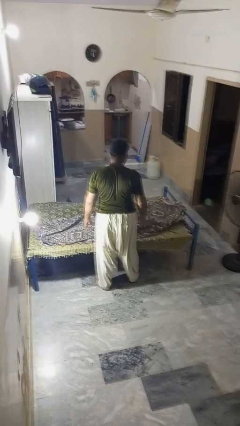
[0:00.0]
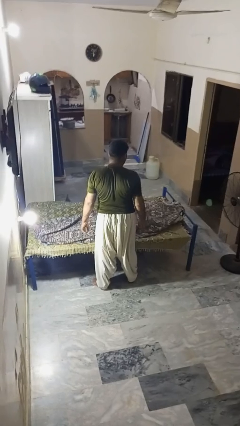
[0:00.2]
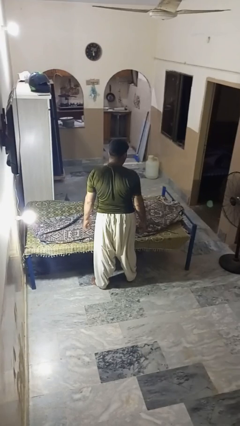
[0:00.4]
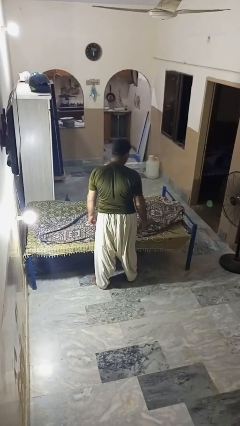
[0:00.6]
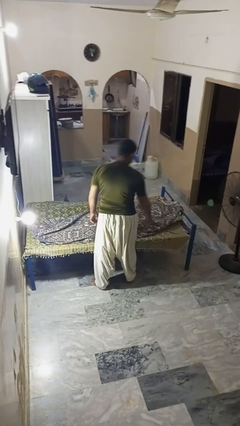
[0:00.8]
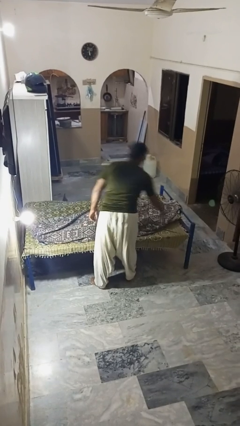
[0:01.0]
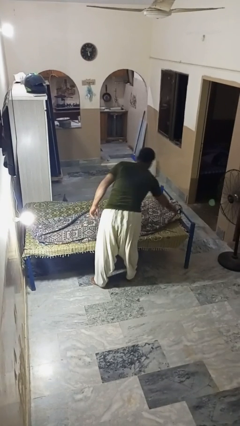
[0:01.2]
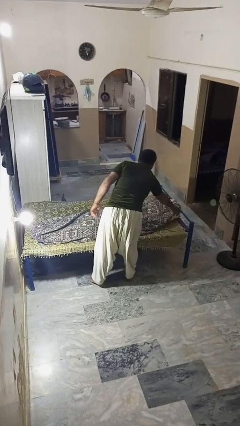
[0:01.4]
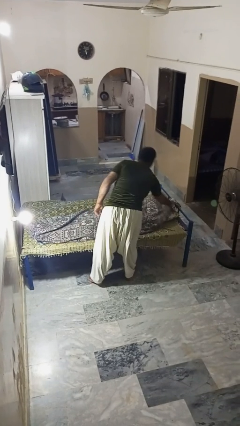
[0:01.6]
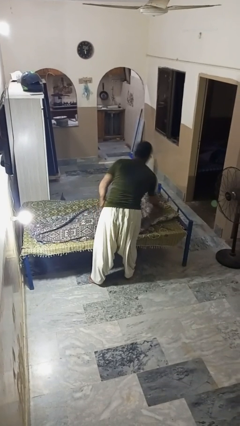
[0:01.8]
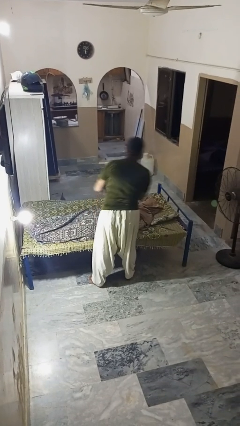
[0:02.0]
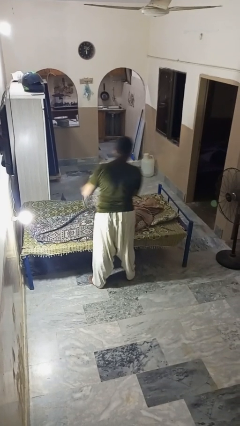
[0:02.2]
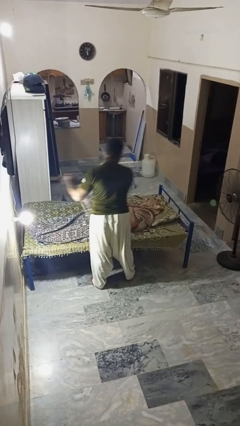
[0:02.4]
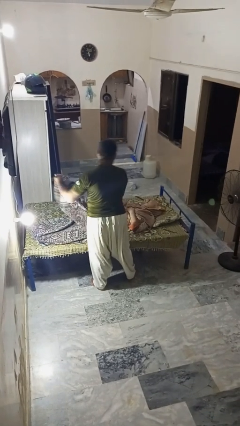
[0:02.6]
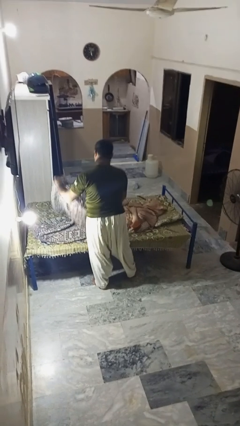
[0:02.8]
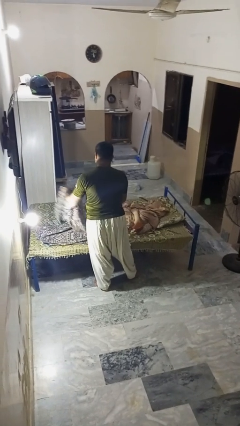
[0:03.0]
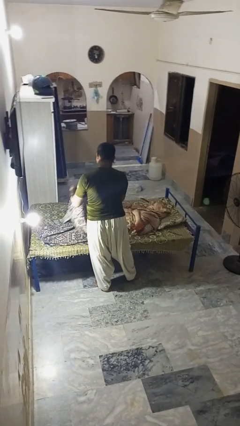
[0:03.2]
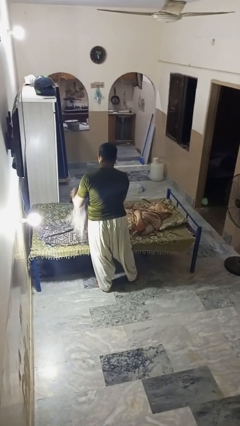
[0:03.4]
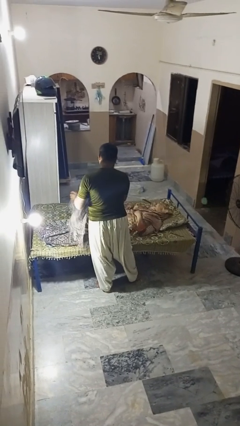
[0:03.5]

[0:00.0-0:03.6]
person uncovers friend with blanket

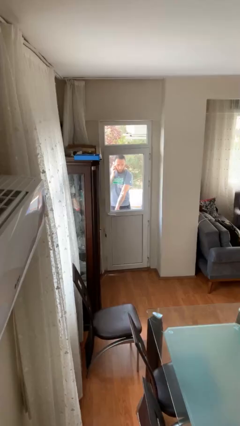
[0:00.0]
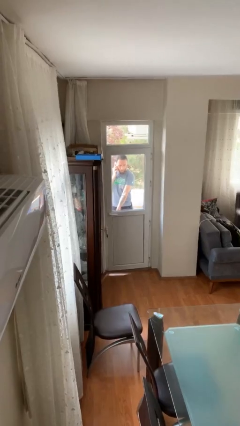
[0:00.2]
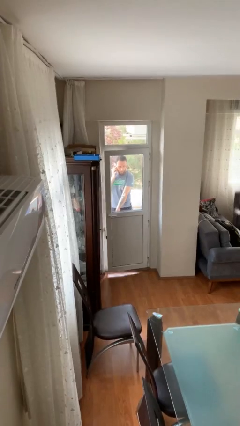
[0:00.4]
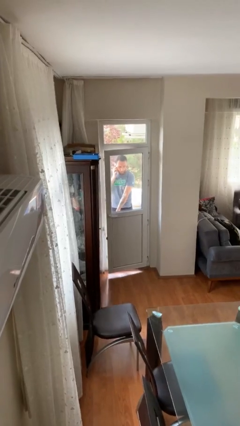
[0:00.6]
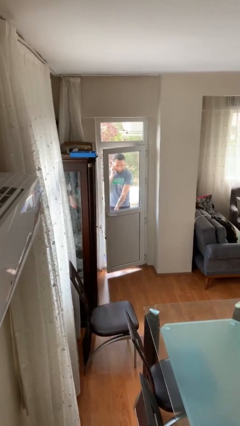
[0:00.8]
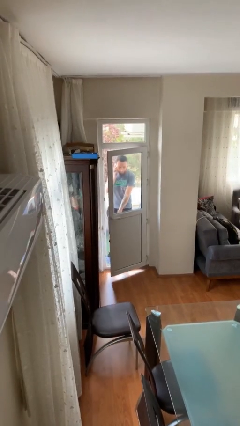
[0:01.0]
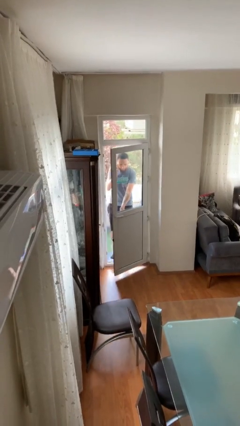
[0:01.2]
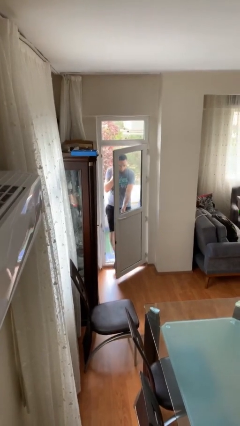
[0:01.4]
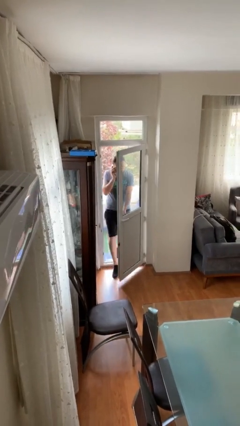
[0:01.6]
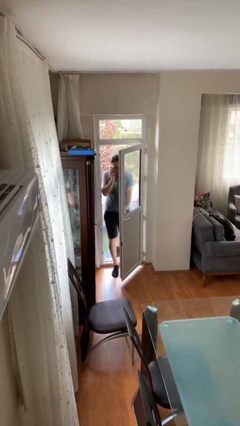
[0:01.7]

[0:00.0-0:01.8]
person opens facility door

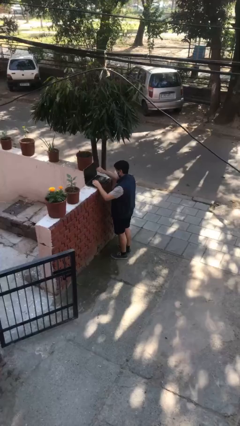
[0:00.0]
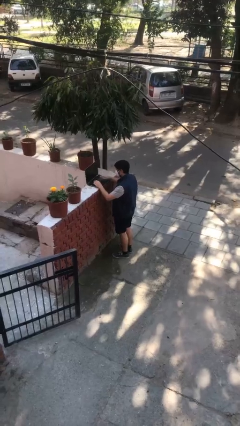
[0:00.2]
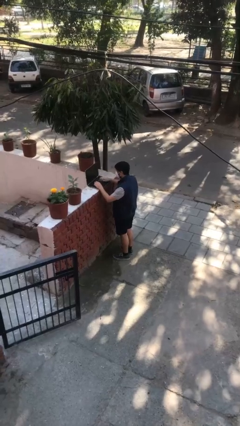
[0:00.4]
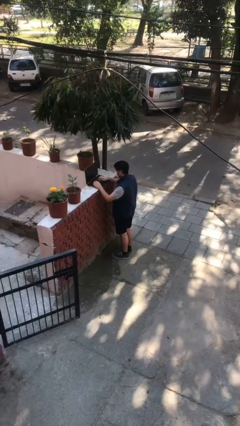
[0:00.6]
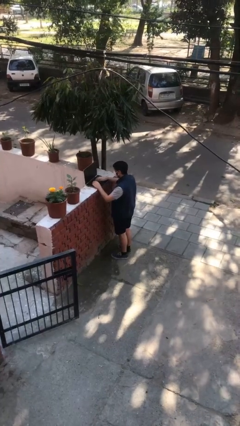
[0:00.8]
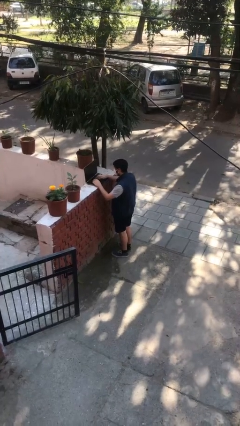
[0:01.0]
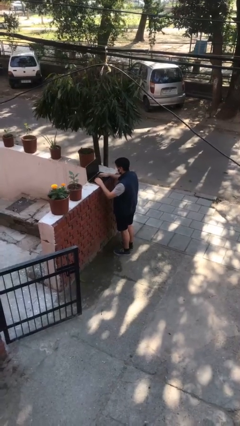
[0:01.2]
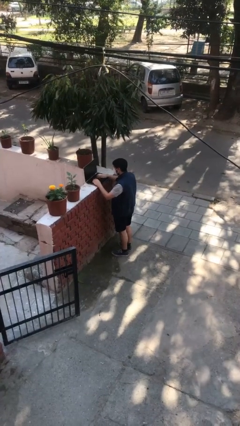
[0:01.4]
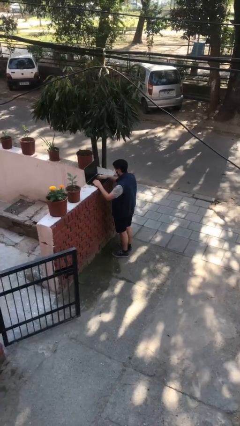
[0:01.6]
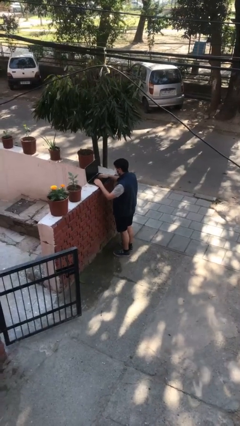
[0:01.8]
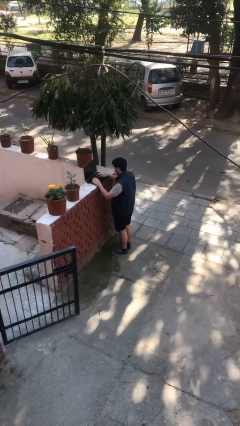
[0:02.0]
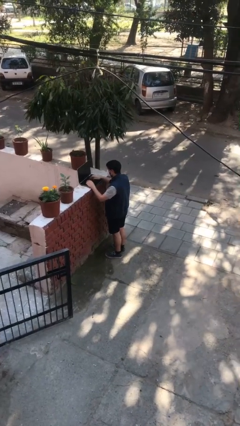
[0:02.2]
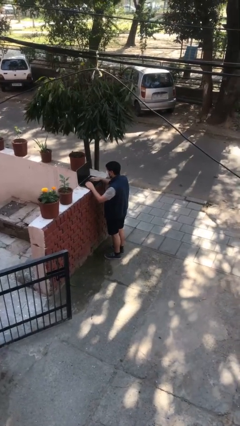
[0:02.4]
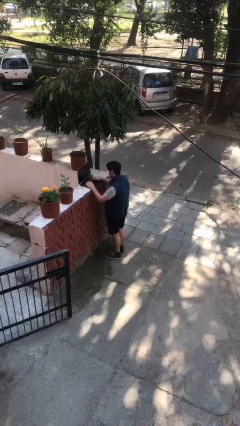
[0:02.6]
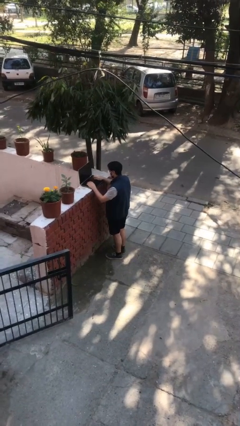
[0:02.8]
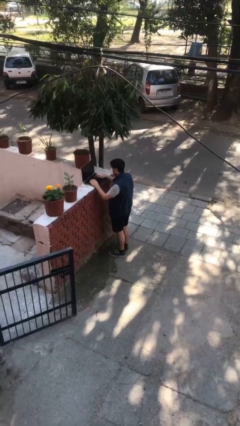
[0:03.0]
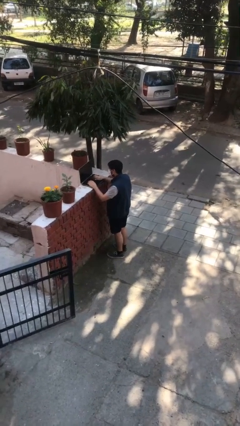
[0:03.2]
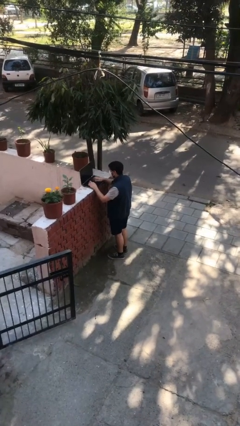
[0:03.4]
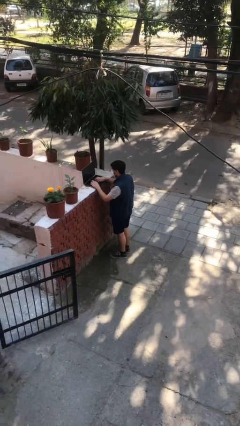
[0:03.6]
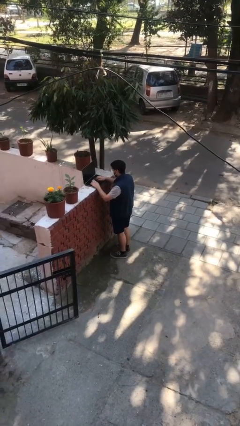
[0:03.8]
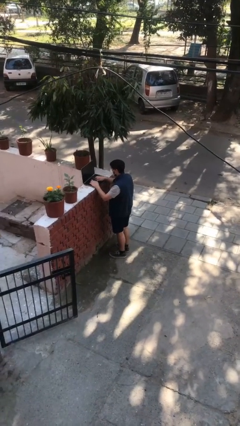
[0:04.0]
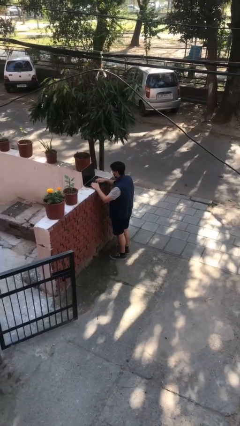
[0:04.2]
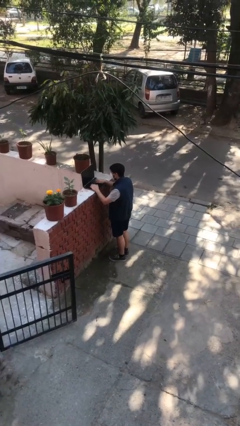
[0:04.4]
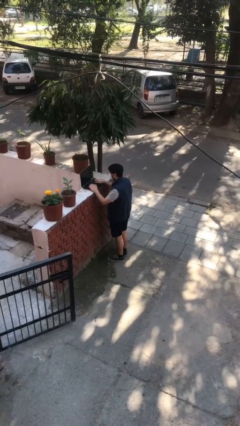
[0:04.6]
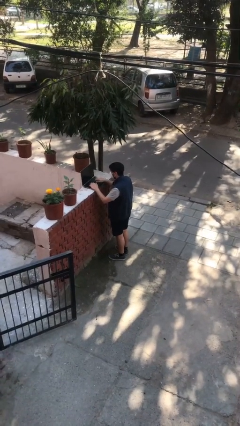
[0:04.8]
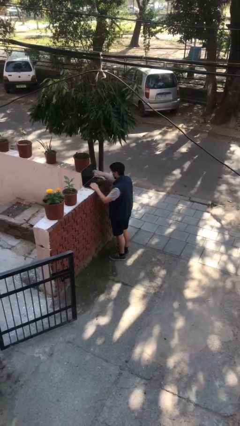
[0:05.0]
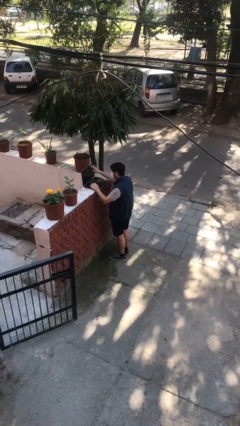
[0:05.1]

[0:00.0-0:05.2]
person interacts with laptop

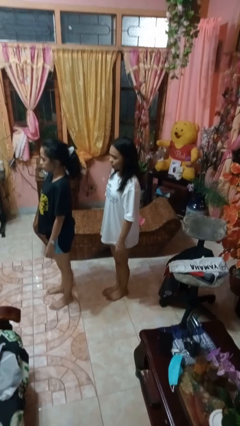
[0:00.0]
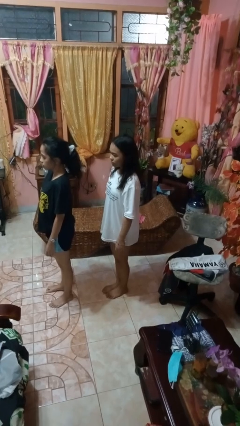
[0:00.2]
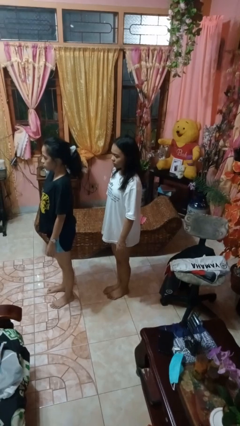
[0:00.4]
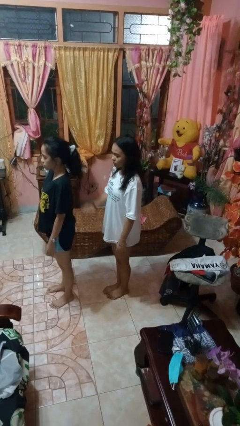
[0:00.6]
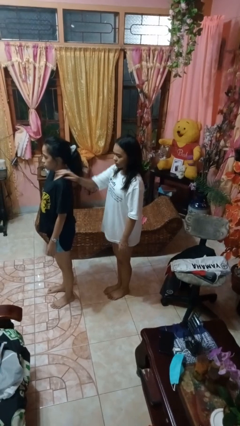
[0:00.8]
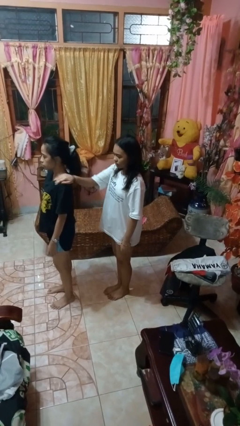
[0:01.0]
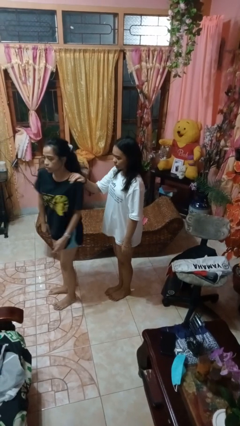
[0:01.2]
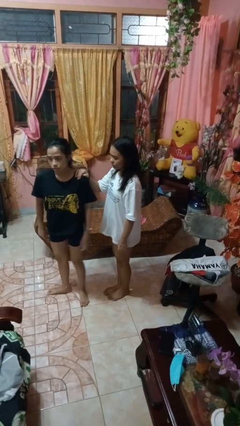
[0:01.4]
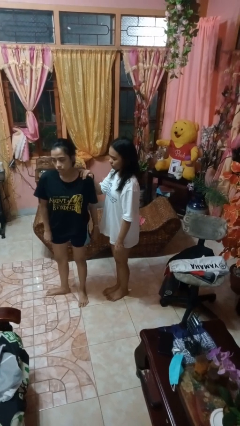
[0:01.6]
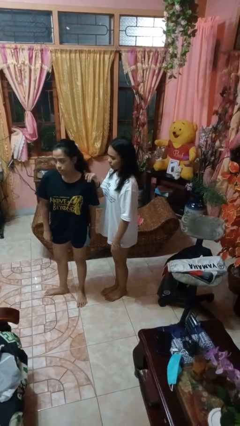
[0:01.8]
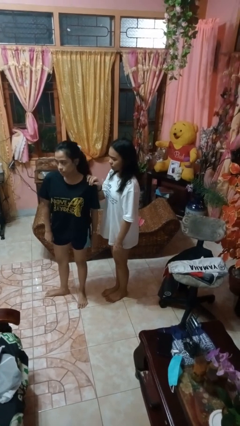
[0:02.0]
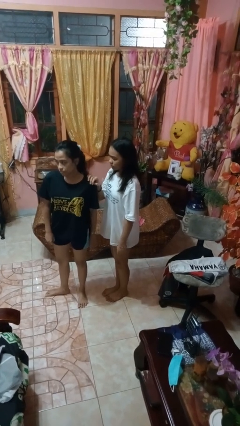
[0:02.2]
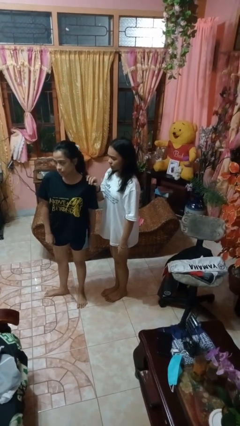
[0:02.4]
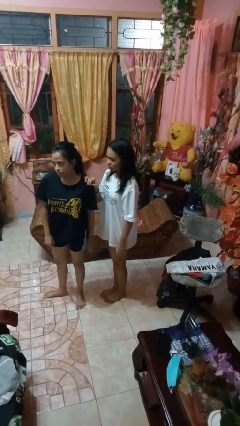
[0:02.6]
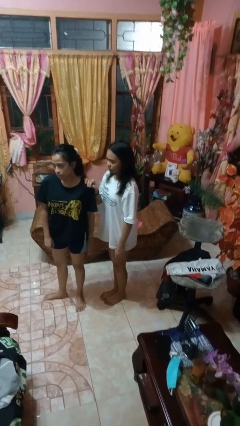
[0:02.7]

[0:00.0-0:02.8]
person grabs person by shoulder

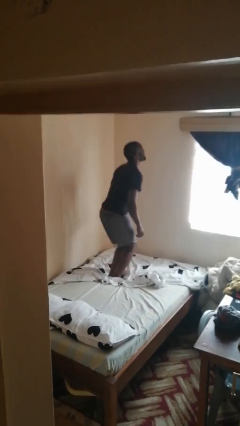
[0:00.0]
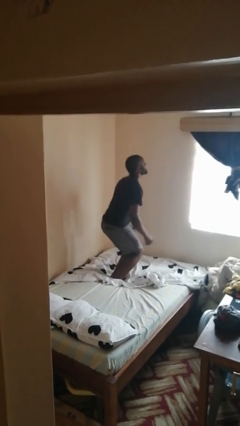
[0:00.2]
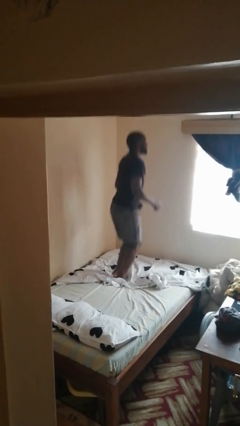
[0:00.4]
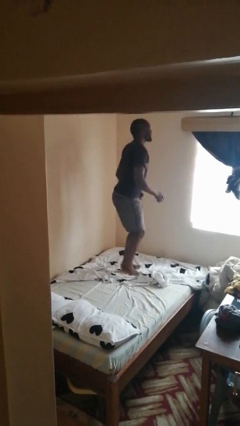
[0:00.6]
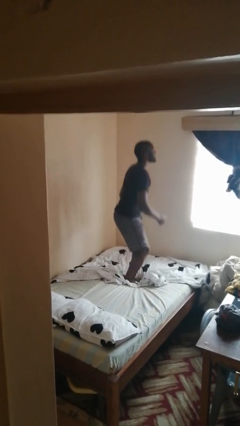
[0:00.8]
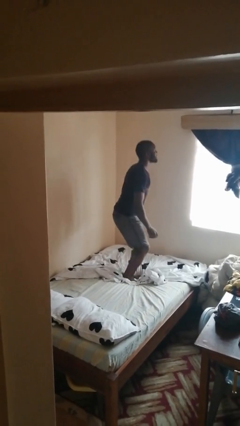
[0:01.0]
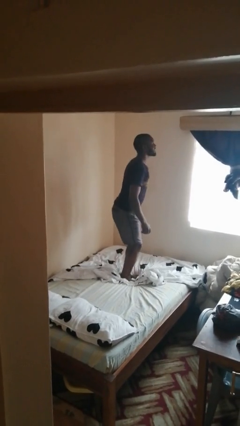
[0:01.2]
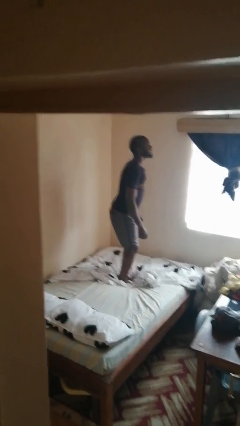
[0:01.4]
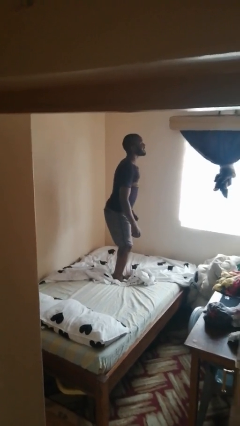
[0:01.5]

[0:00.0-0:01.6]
person jumps on bed

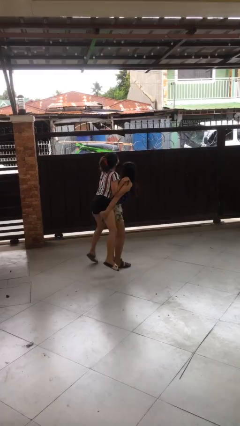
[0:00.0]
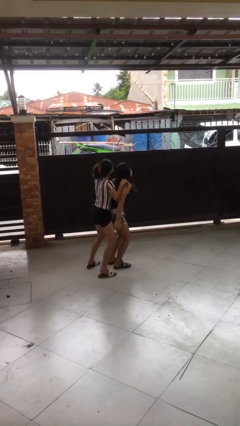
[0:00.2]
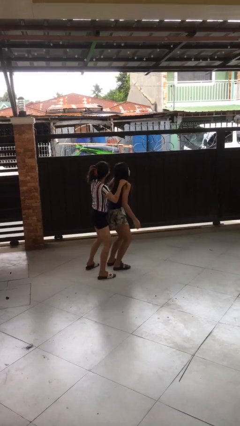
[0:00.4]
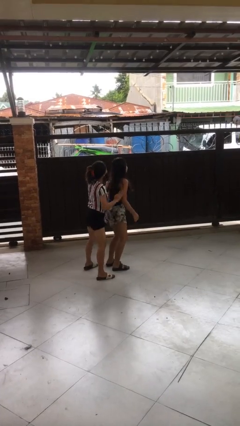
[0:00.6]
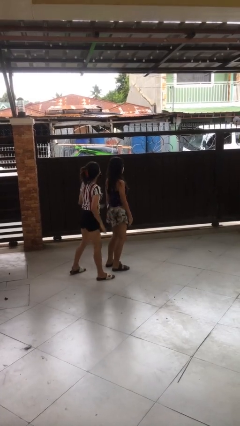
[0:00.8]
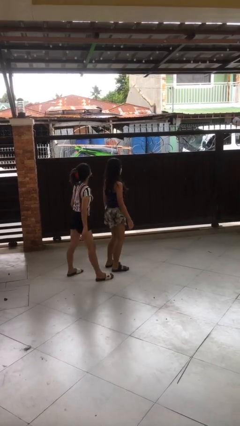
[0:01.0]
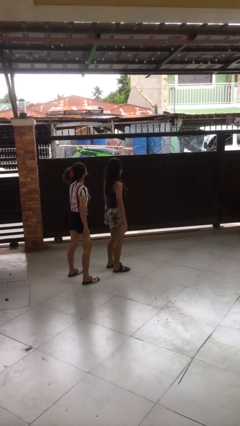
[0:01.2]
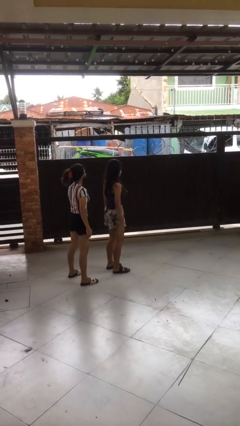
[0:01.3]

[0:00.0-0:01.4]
person puts down person

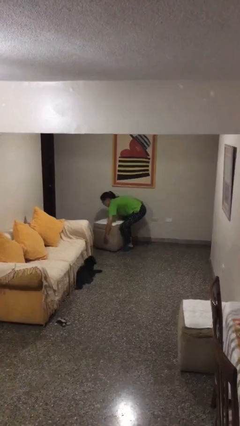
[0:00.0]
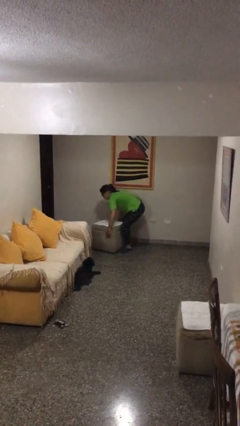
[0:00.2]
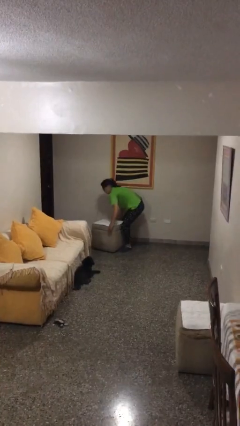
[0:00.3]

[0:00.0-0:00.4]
person carries heavy object

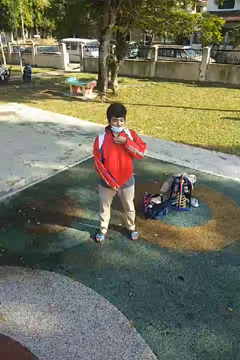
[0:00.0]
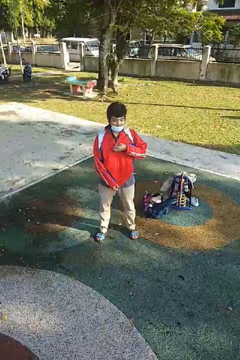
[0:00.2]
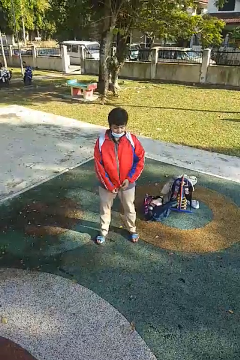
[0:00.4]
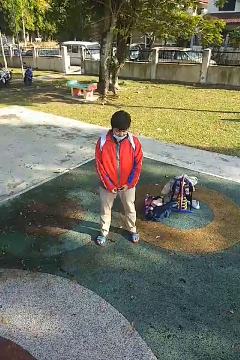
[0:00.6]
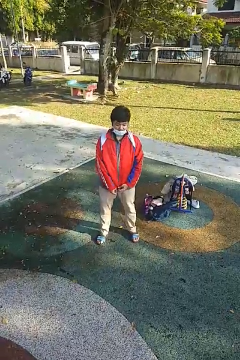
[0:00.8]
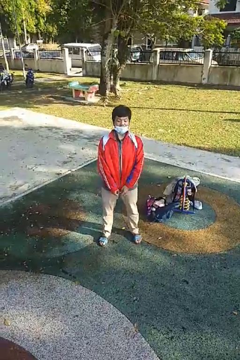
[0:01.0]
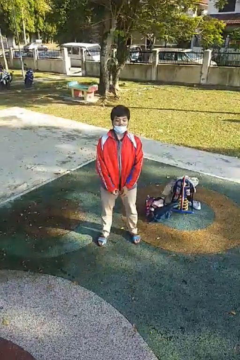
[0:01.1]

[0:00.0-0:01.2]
person unzips jacket
